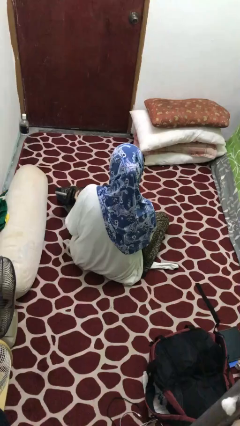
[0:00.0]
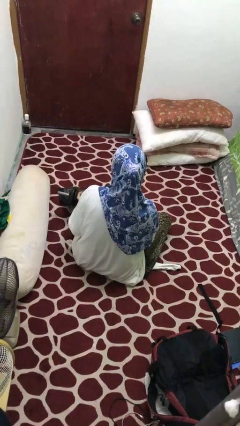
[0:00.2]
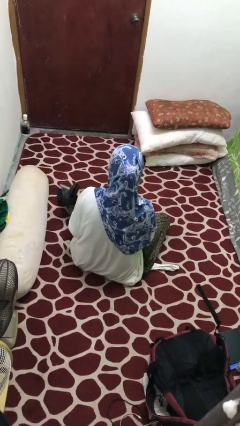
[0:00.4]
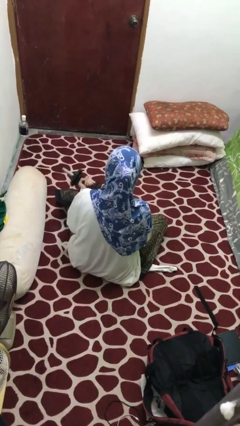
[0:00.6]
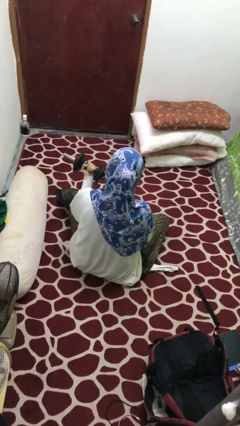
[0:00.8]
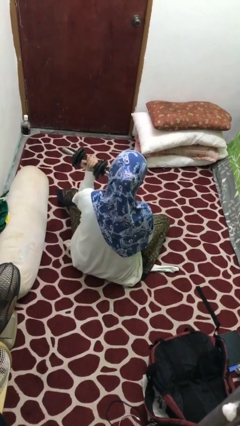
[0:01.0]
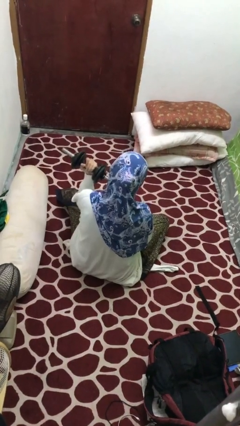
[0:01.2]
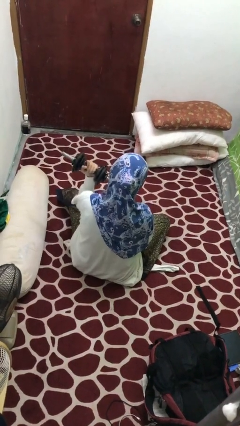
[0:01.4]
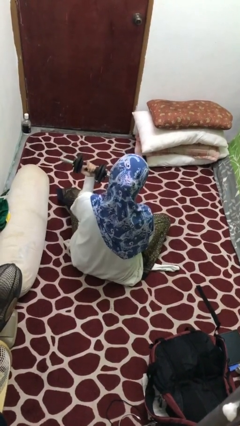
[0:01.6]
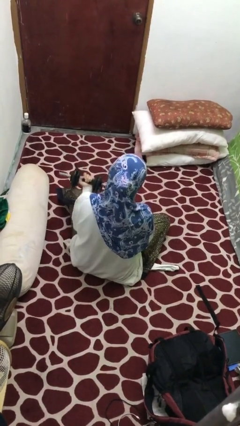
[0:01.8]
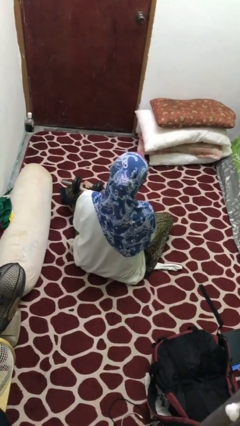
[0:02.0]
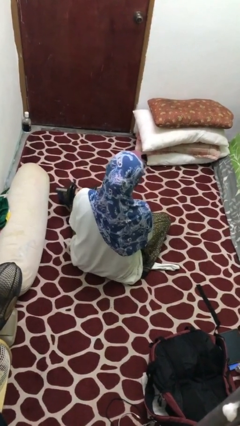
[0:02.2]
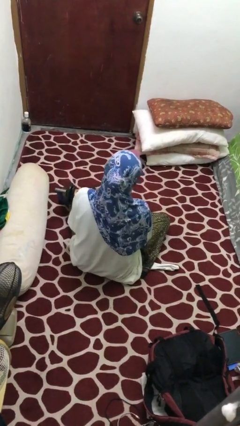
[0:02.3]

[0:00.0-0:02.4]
person lifts dumbbells

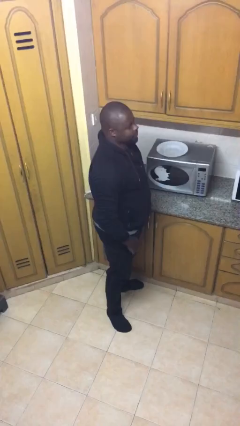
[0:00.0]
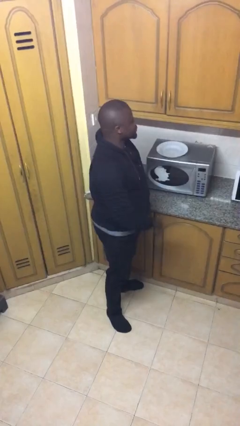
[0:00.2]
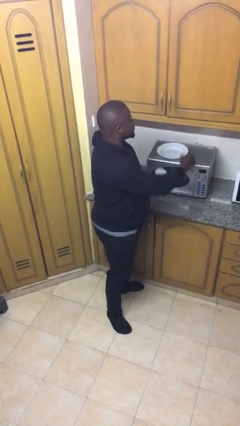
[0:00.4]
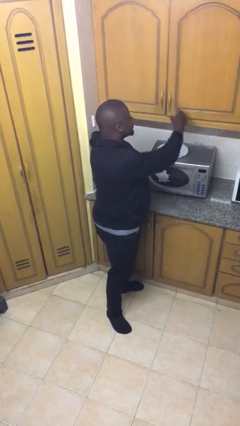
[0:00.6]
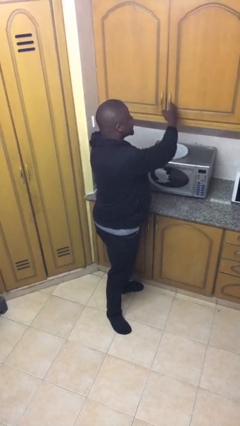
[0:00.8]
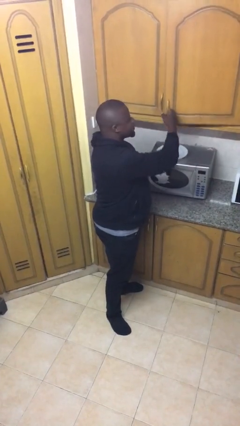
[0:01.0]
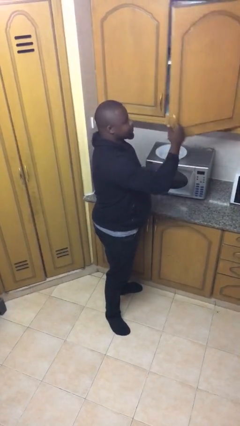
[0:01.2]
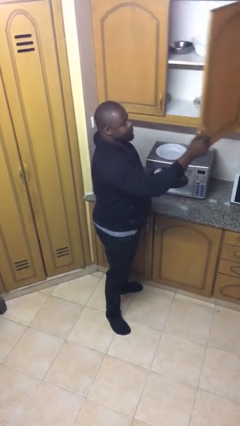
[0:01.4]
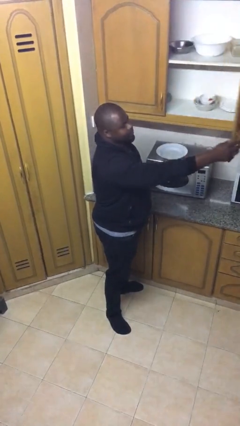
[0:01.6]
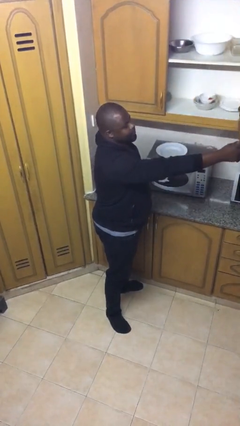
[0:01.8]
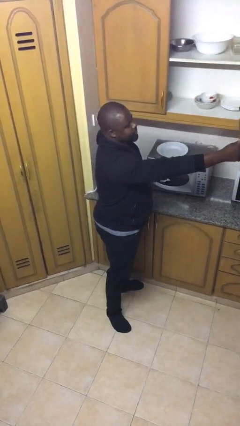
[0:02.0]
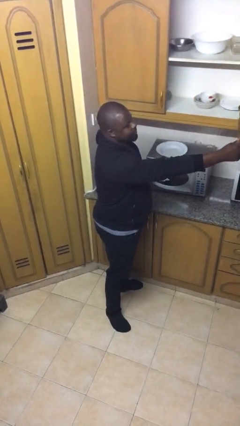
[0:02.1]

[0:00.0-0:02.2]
person opens cabinet

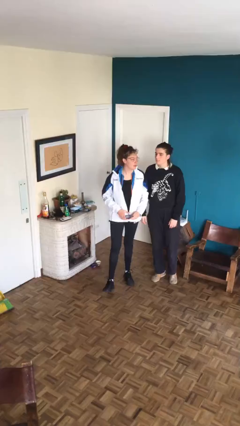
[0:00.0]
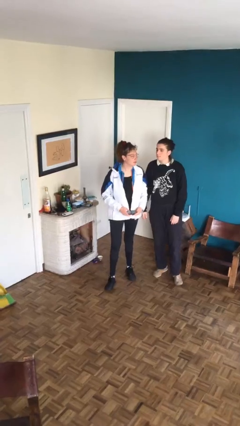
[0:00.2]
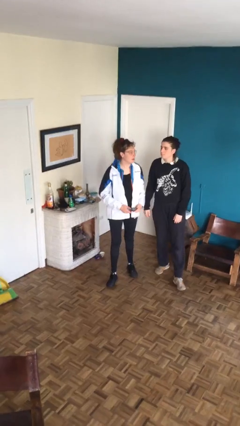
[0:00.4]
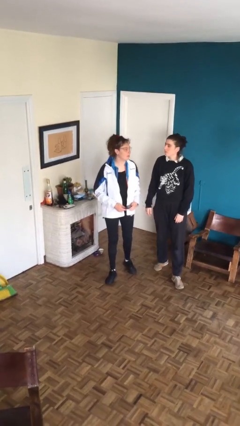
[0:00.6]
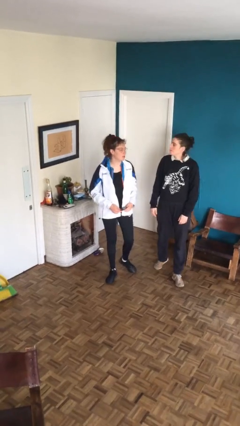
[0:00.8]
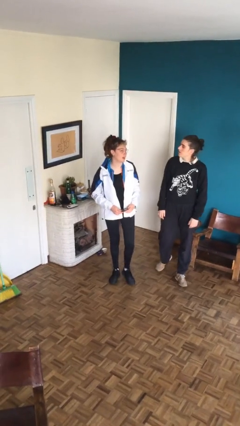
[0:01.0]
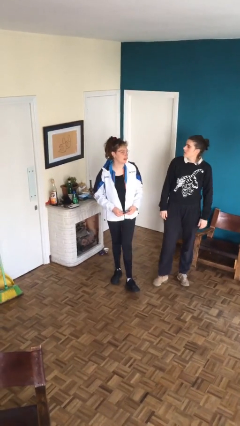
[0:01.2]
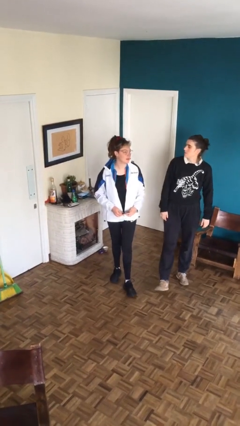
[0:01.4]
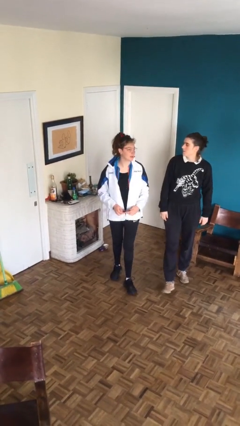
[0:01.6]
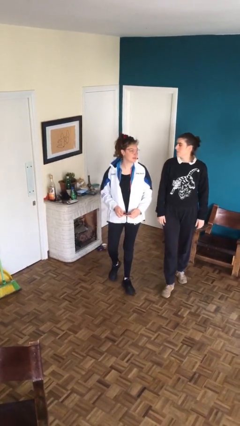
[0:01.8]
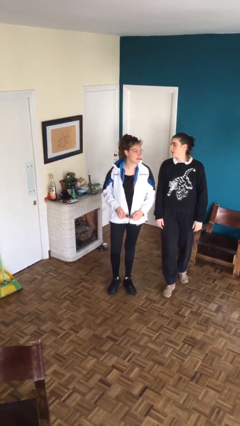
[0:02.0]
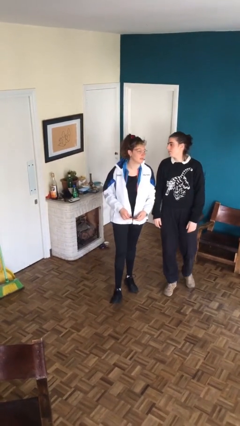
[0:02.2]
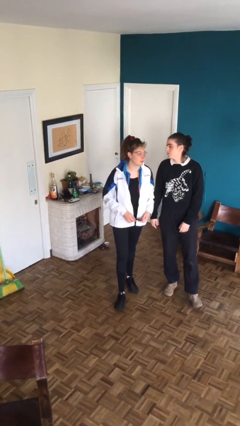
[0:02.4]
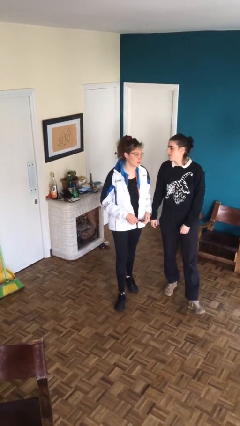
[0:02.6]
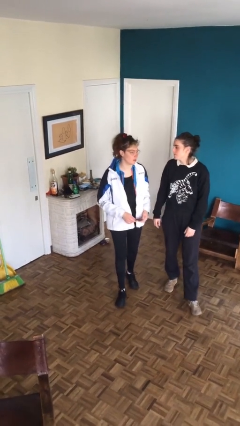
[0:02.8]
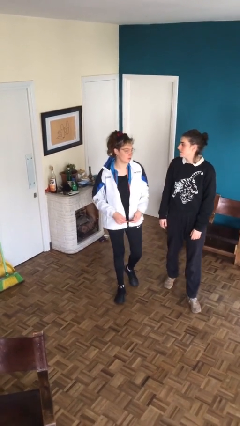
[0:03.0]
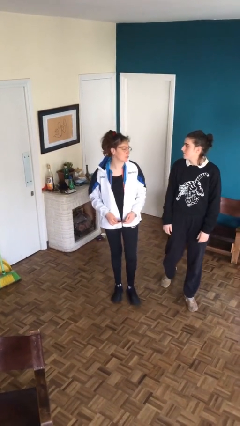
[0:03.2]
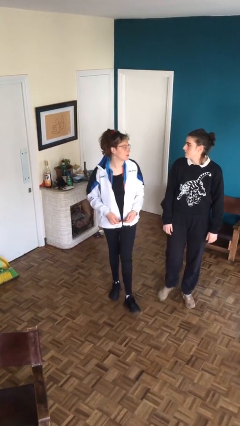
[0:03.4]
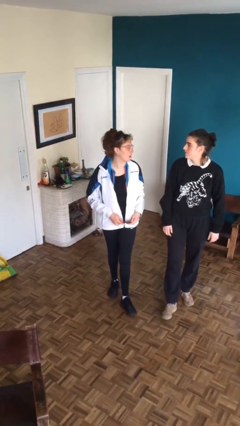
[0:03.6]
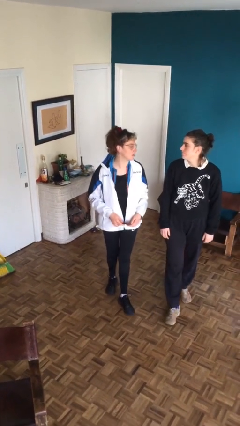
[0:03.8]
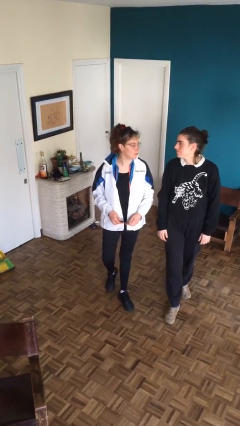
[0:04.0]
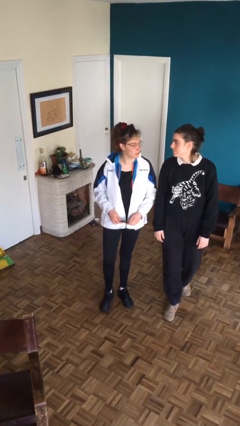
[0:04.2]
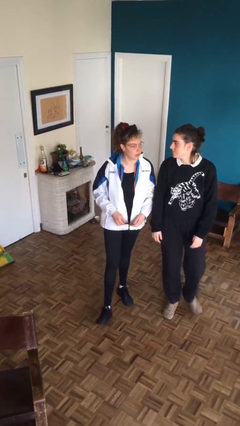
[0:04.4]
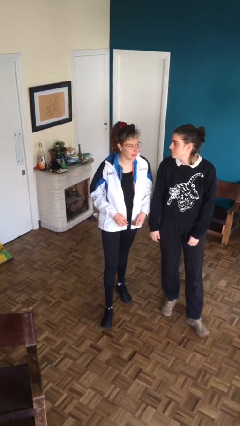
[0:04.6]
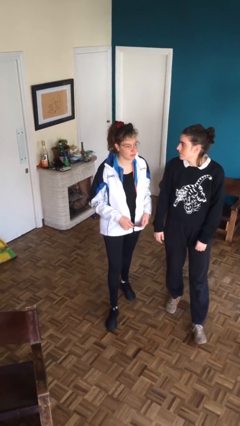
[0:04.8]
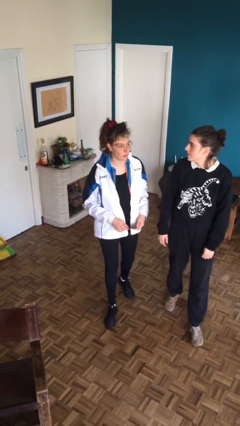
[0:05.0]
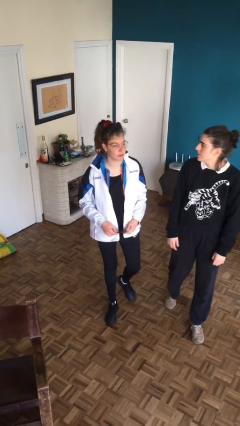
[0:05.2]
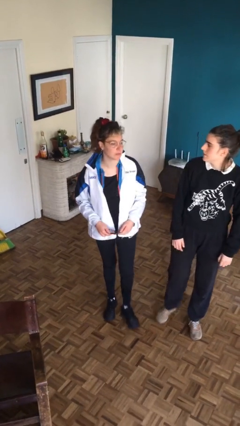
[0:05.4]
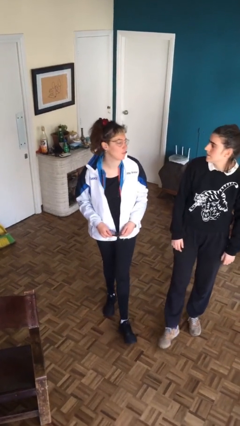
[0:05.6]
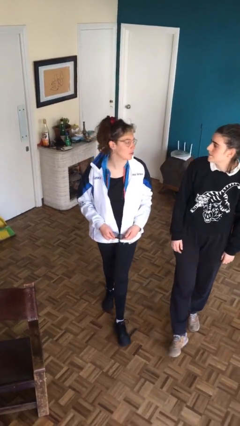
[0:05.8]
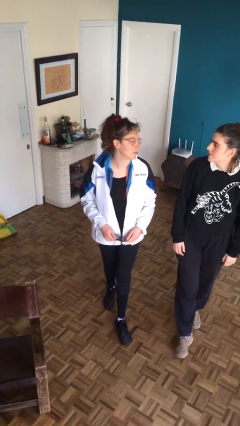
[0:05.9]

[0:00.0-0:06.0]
person talks to person

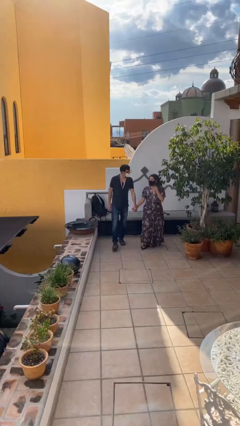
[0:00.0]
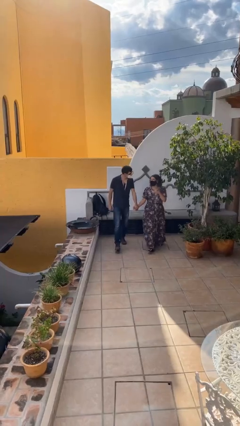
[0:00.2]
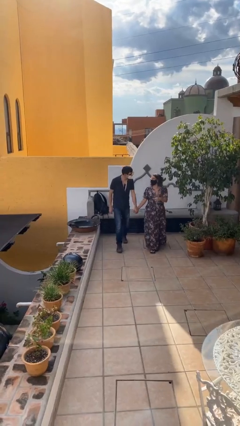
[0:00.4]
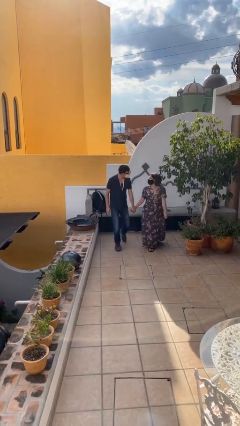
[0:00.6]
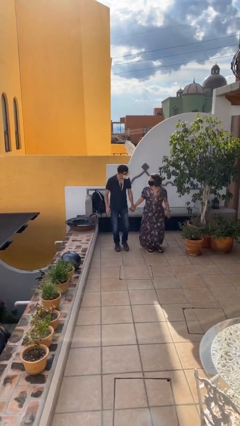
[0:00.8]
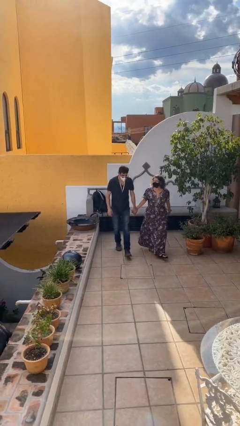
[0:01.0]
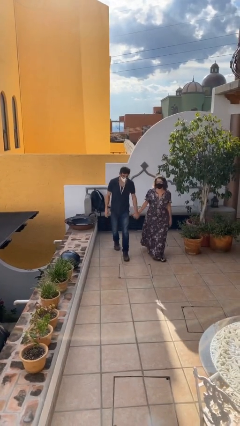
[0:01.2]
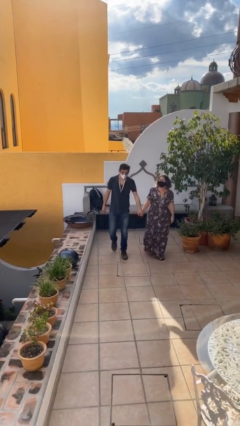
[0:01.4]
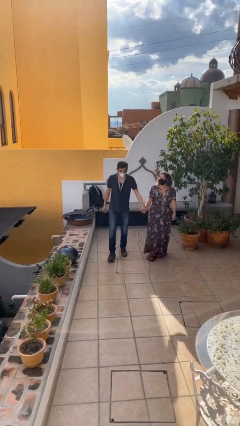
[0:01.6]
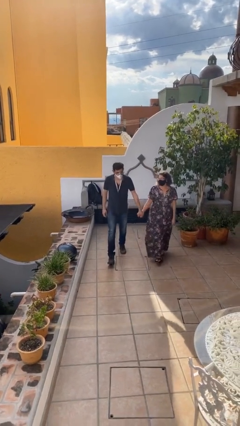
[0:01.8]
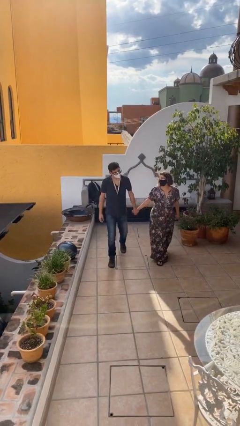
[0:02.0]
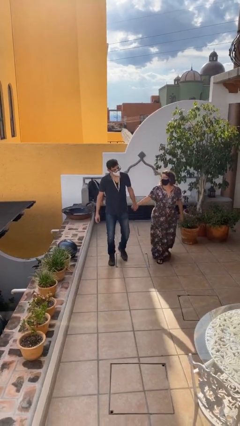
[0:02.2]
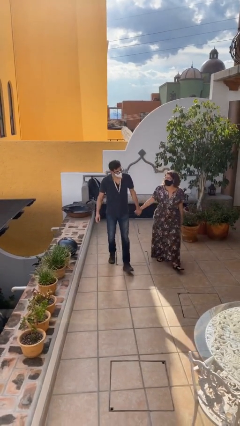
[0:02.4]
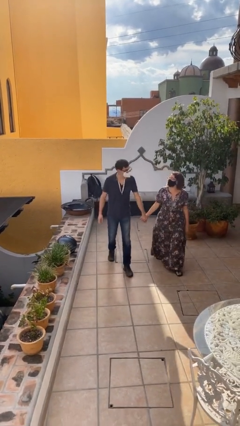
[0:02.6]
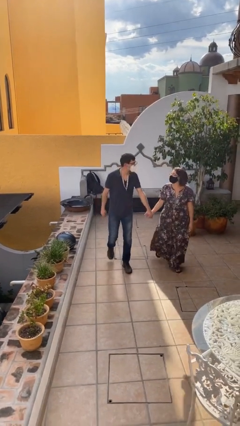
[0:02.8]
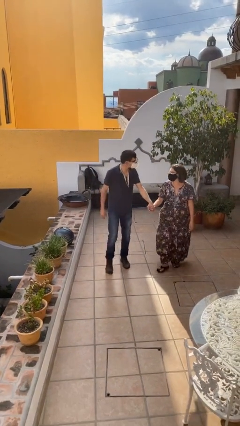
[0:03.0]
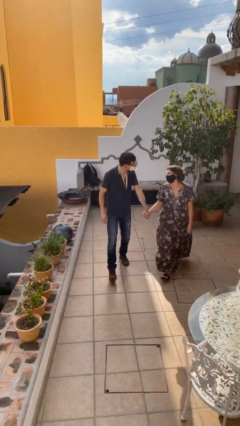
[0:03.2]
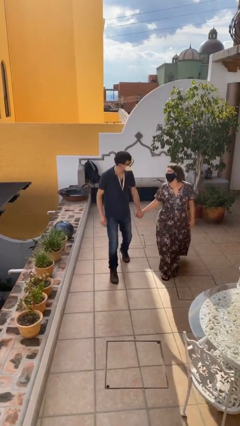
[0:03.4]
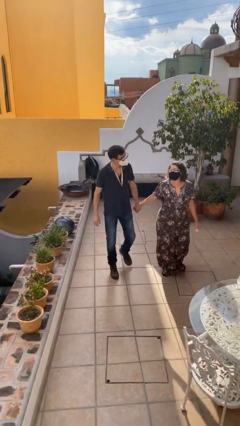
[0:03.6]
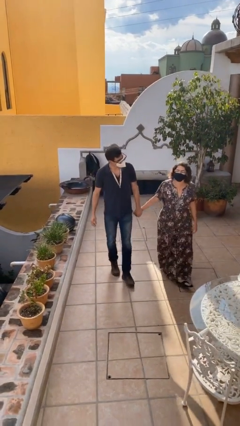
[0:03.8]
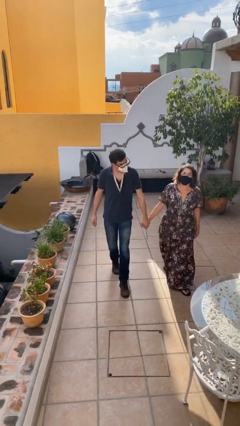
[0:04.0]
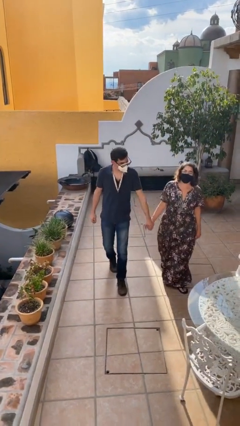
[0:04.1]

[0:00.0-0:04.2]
person holds hand

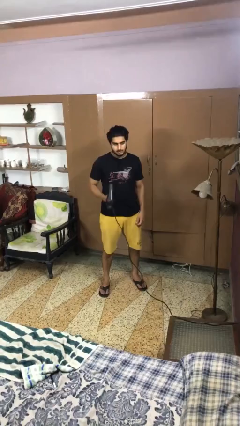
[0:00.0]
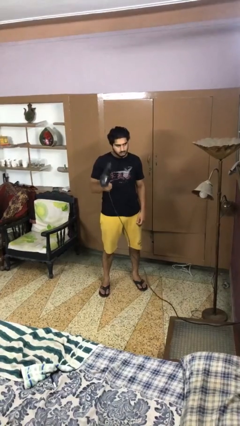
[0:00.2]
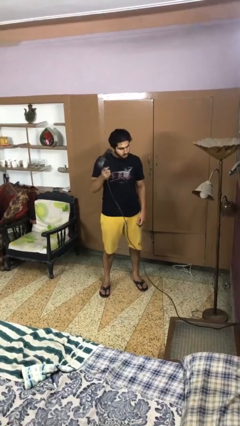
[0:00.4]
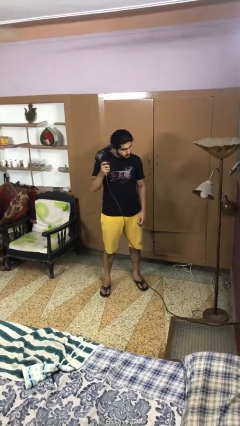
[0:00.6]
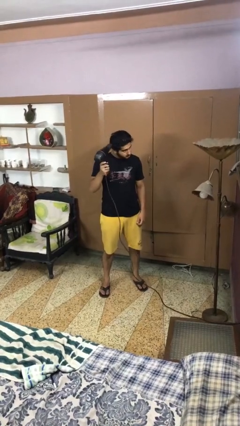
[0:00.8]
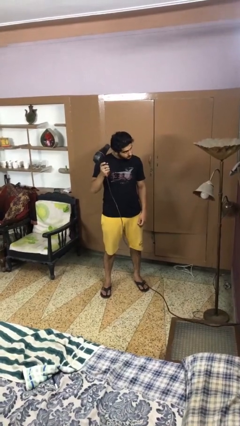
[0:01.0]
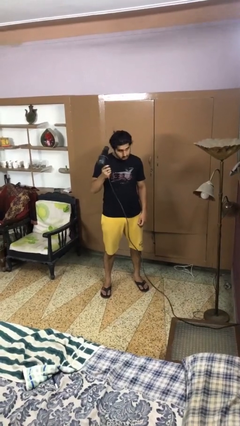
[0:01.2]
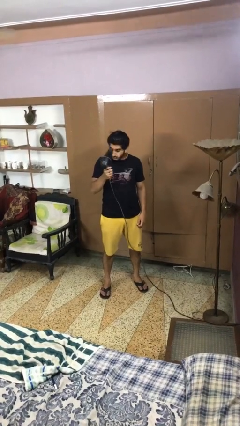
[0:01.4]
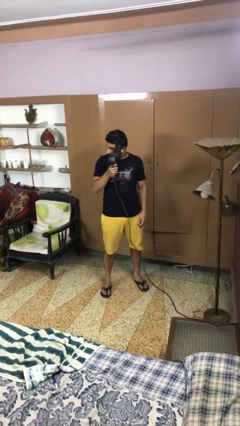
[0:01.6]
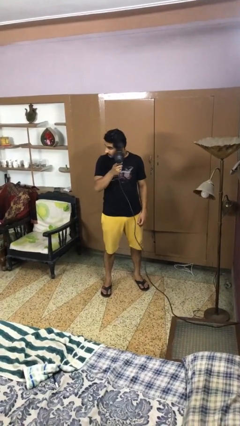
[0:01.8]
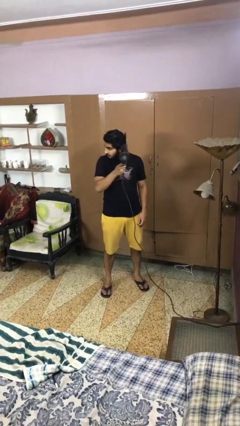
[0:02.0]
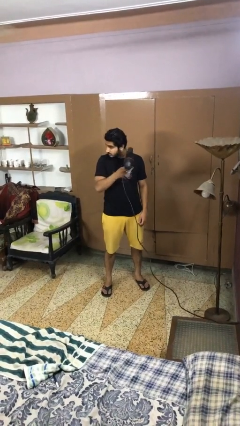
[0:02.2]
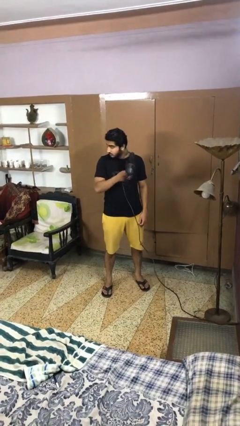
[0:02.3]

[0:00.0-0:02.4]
person dries hair with hairdryer

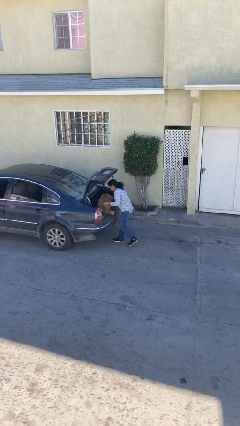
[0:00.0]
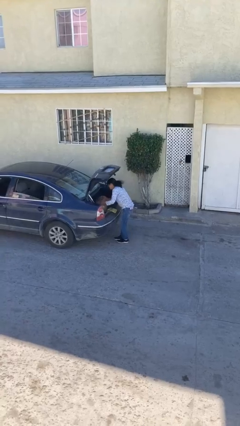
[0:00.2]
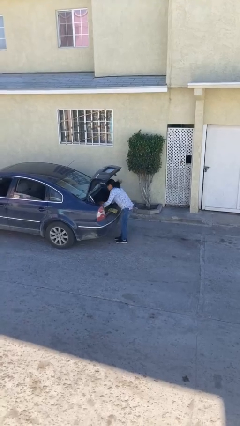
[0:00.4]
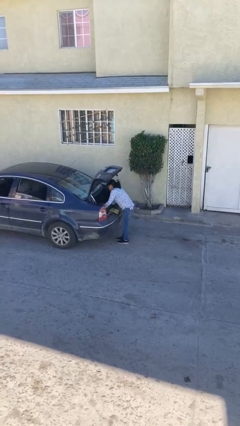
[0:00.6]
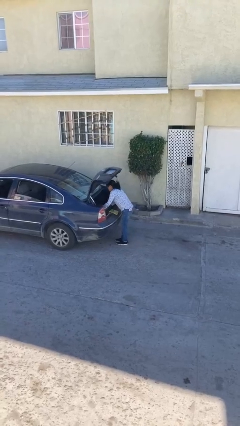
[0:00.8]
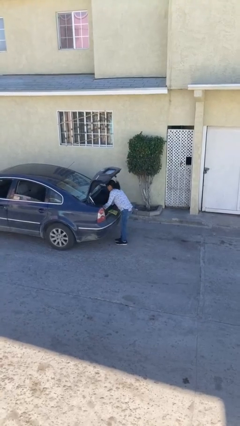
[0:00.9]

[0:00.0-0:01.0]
person loads car
